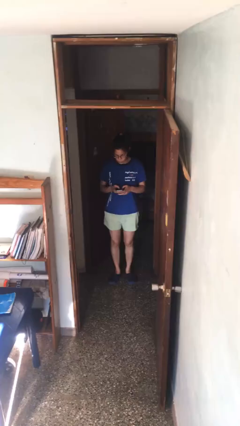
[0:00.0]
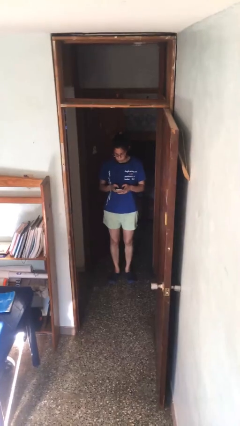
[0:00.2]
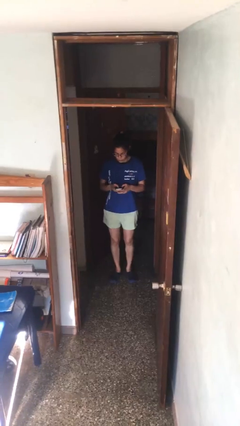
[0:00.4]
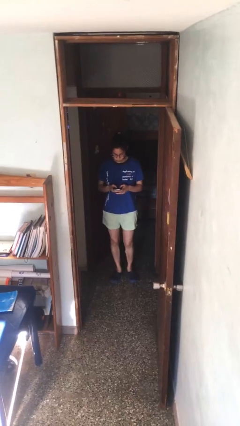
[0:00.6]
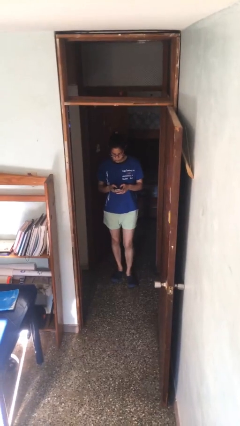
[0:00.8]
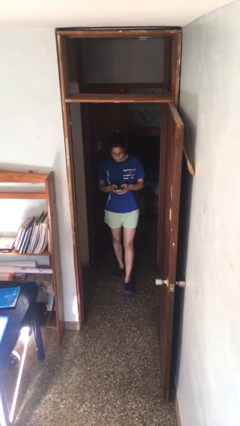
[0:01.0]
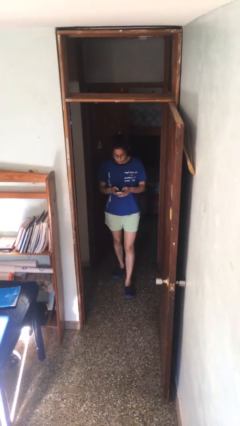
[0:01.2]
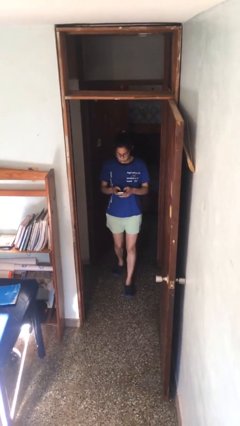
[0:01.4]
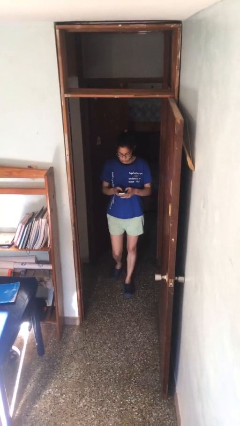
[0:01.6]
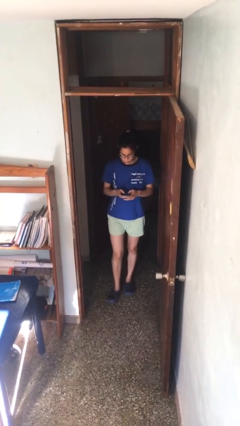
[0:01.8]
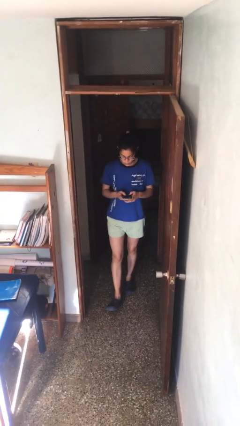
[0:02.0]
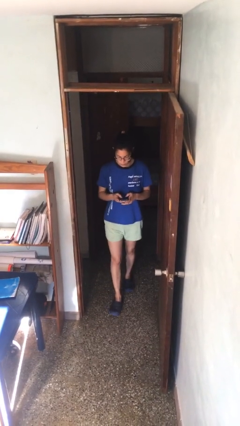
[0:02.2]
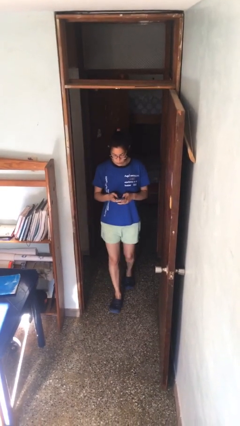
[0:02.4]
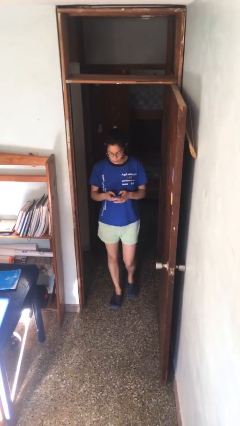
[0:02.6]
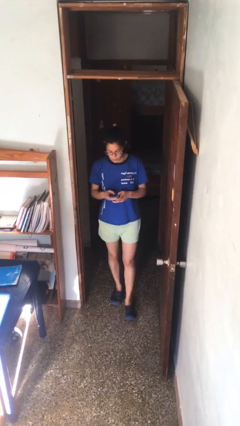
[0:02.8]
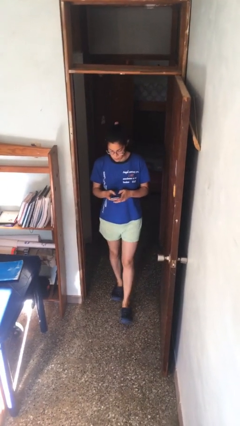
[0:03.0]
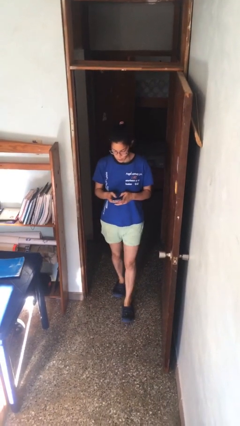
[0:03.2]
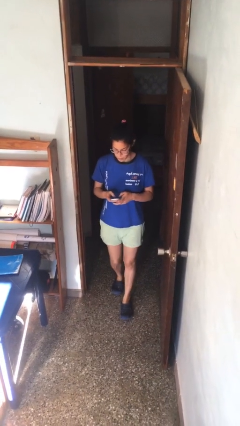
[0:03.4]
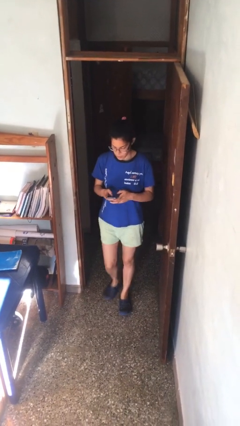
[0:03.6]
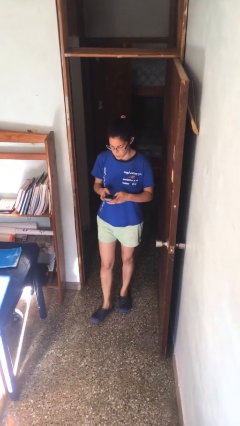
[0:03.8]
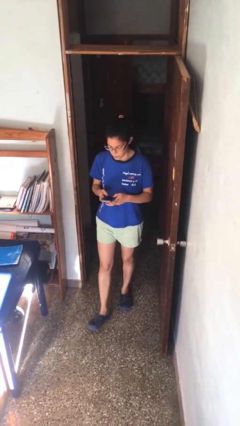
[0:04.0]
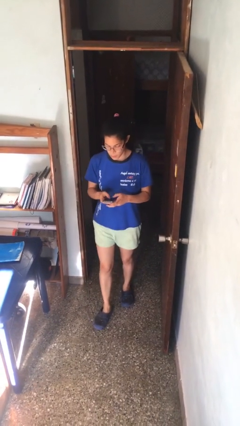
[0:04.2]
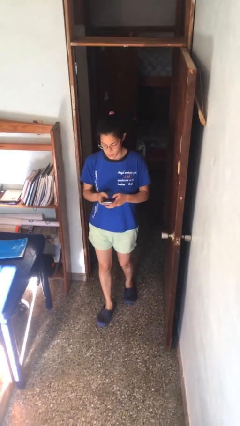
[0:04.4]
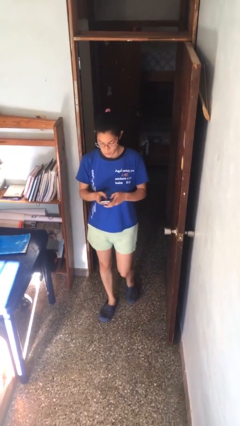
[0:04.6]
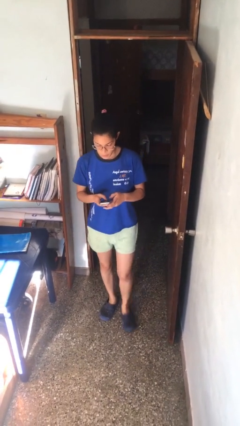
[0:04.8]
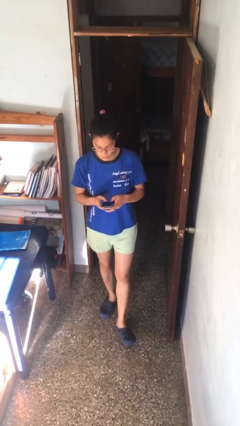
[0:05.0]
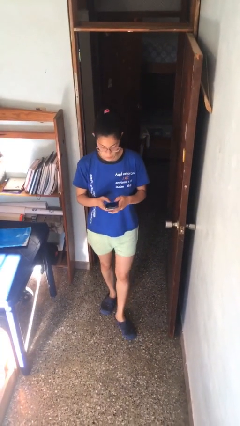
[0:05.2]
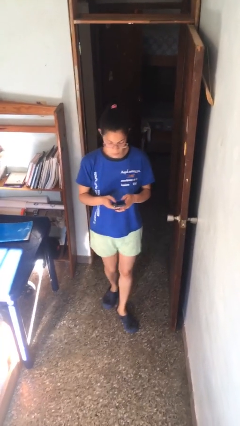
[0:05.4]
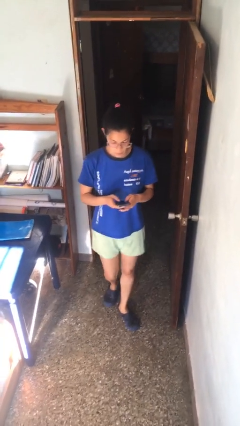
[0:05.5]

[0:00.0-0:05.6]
person texts on phone

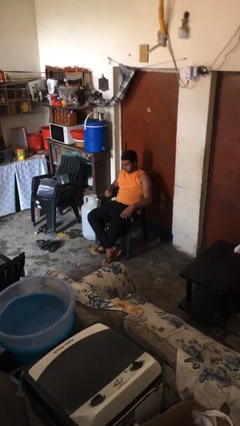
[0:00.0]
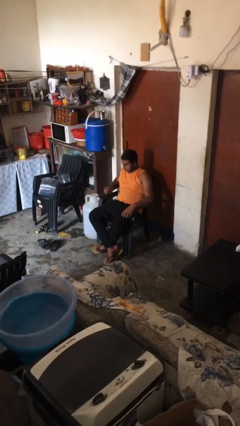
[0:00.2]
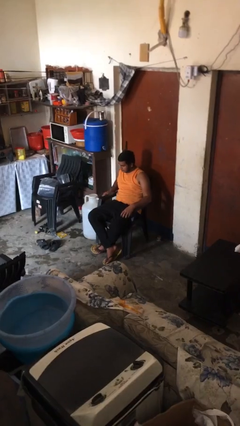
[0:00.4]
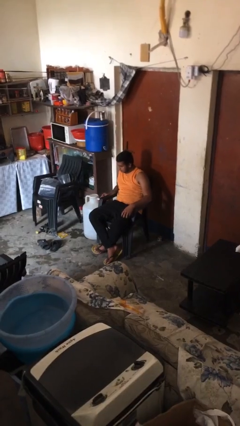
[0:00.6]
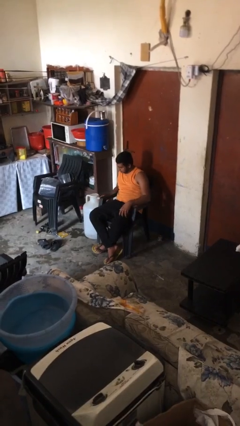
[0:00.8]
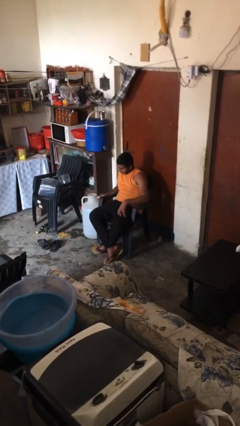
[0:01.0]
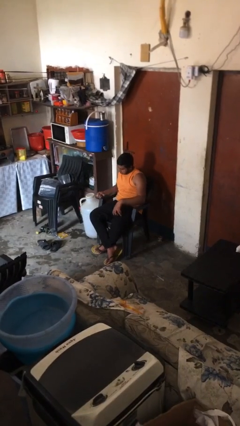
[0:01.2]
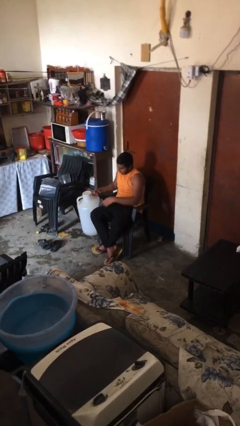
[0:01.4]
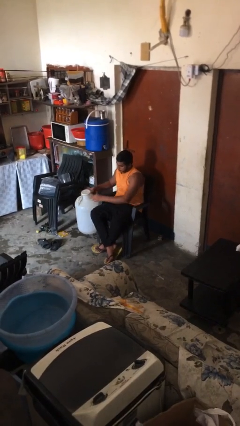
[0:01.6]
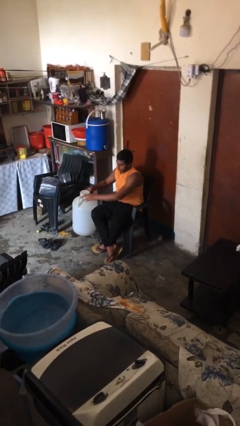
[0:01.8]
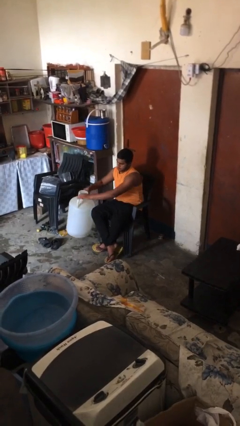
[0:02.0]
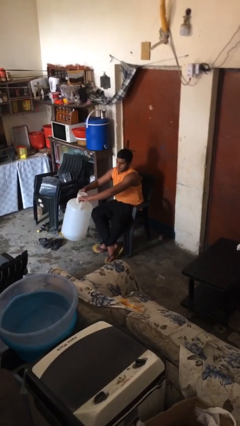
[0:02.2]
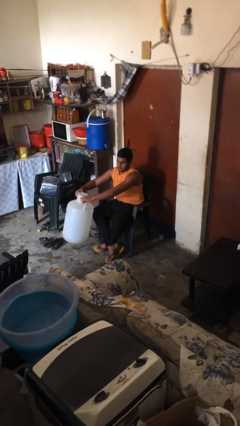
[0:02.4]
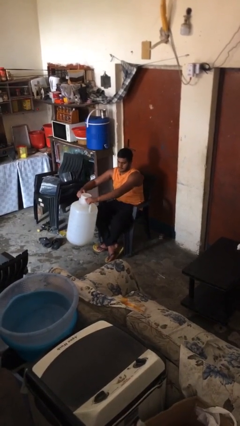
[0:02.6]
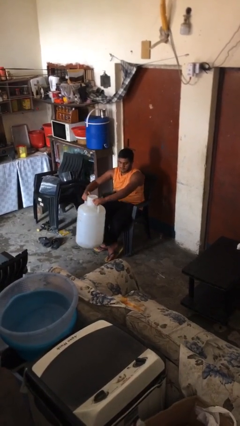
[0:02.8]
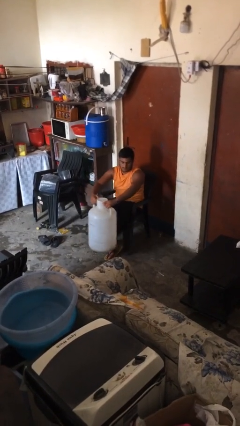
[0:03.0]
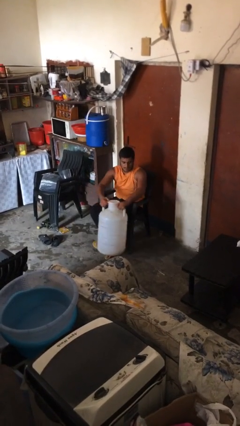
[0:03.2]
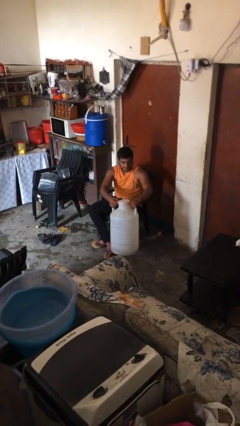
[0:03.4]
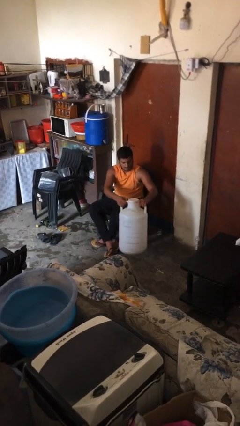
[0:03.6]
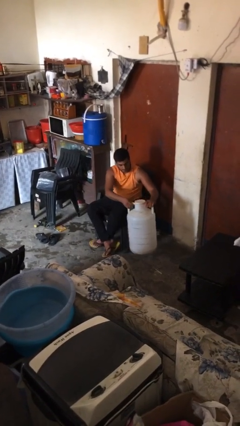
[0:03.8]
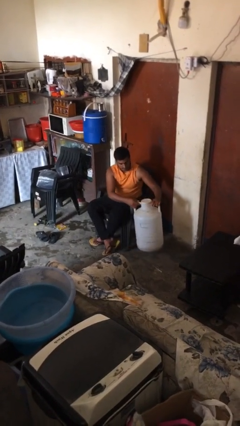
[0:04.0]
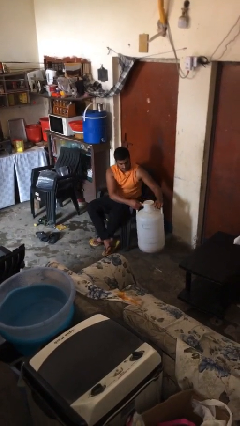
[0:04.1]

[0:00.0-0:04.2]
person picks up object from floor

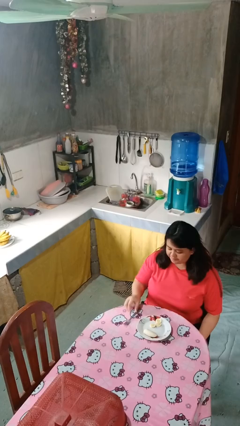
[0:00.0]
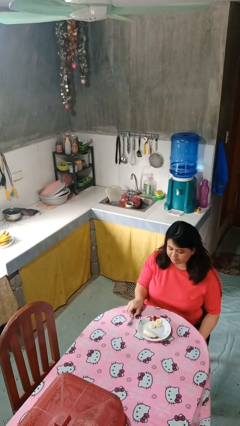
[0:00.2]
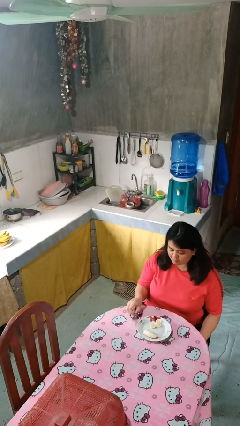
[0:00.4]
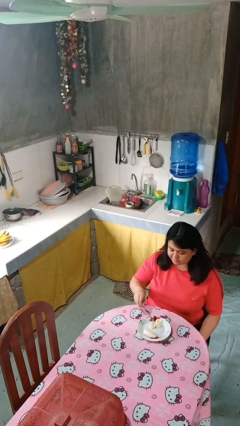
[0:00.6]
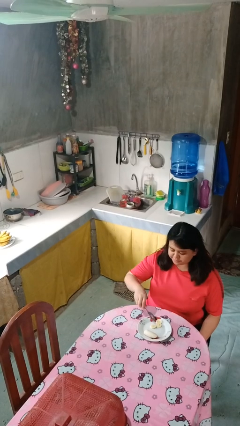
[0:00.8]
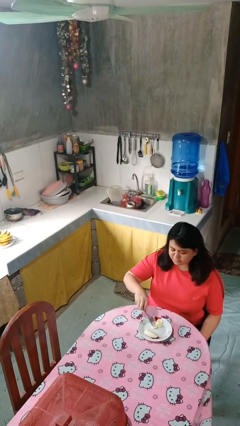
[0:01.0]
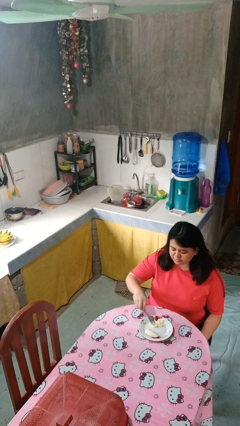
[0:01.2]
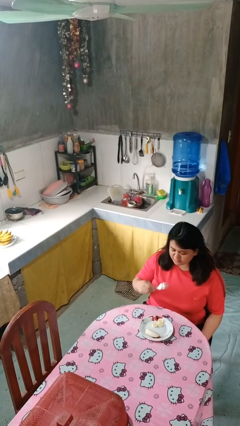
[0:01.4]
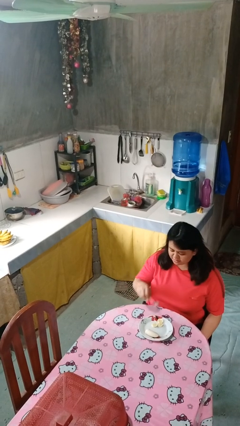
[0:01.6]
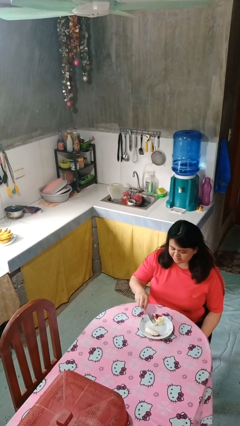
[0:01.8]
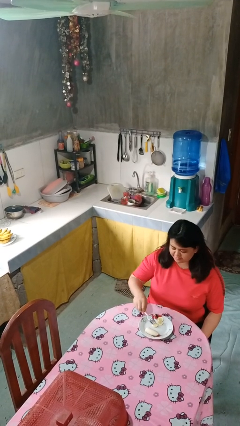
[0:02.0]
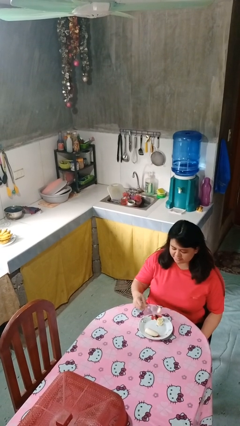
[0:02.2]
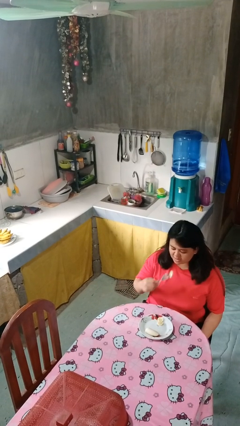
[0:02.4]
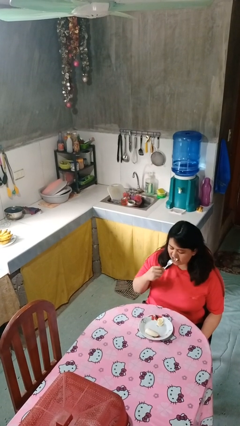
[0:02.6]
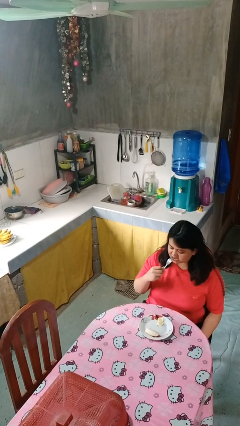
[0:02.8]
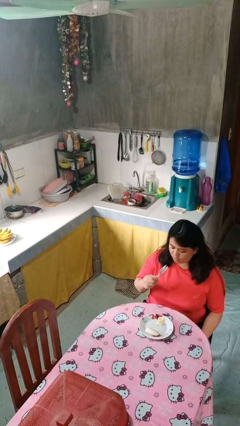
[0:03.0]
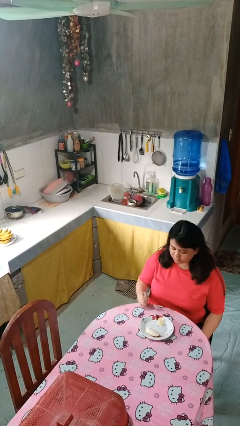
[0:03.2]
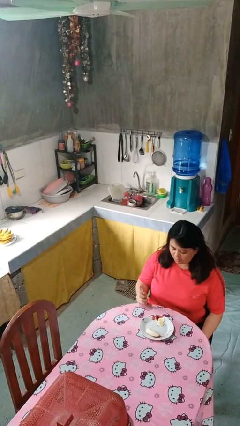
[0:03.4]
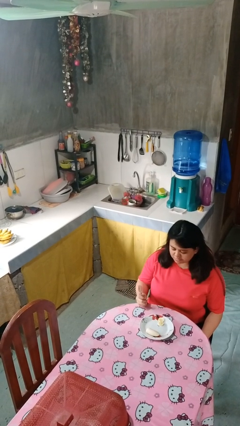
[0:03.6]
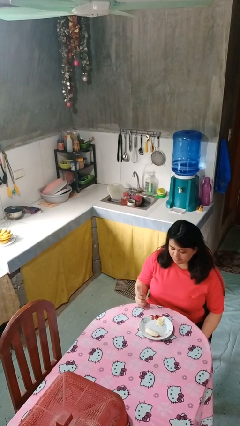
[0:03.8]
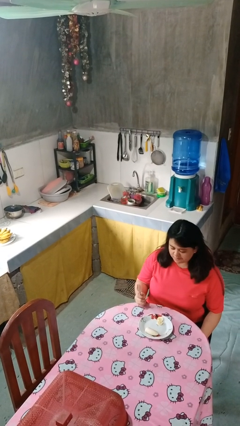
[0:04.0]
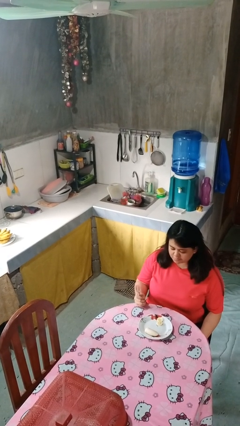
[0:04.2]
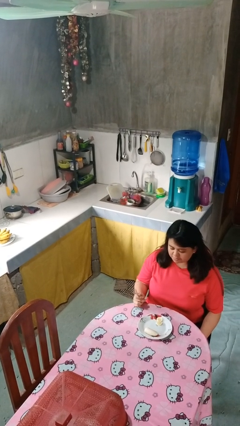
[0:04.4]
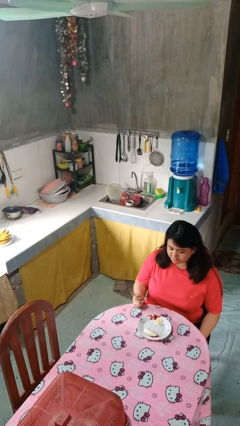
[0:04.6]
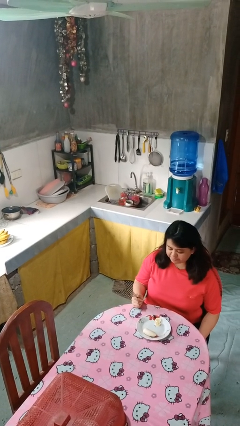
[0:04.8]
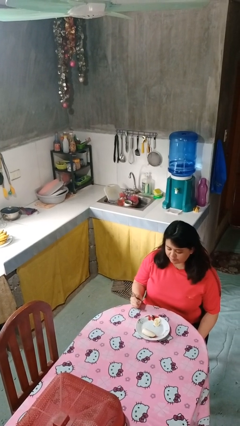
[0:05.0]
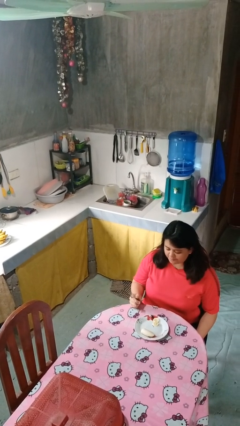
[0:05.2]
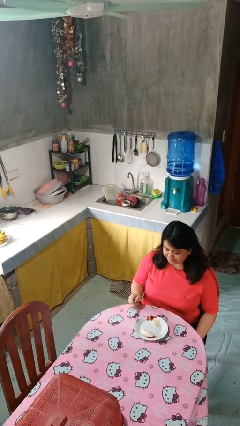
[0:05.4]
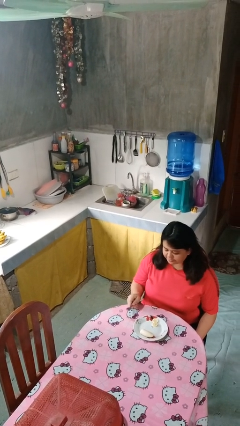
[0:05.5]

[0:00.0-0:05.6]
person eats with utensil

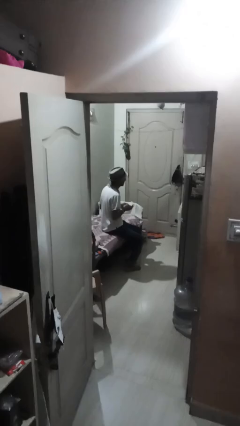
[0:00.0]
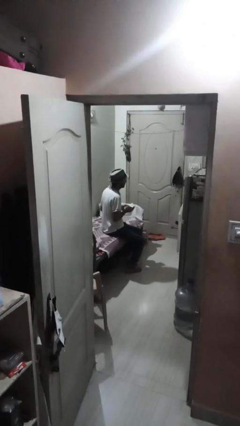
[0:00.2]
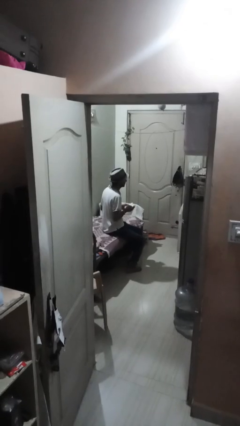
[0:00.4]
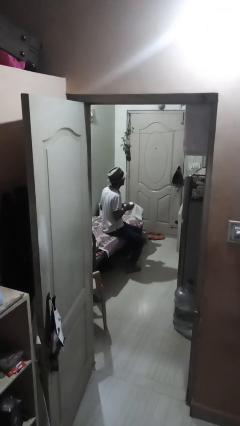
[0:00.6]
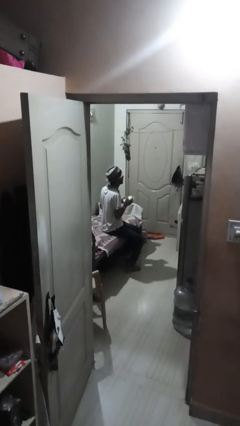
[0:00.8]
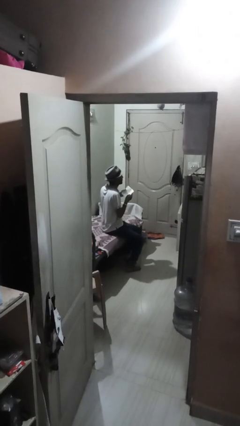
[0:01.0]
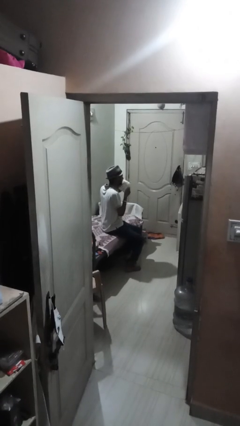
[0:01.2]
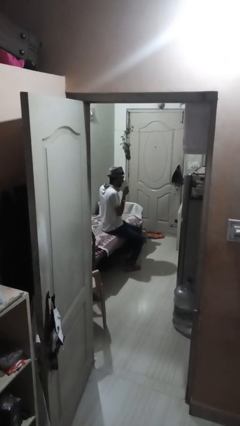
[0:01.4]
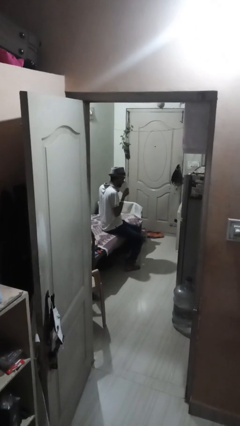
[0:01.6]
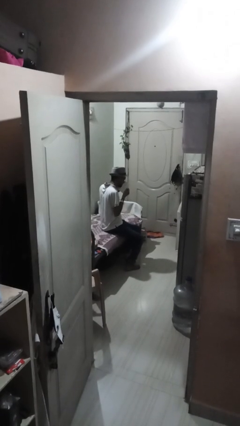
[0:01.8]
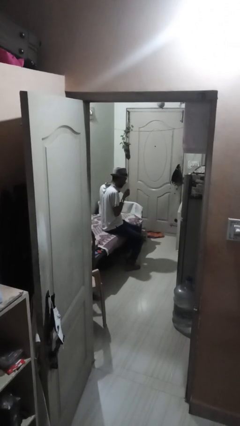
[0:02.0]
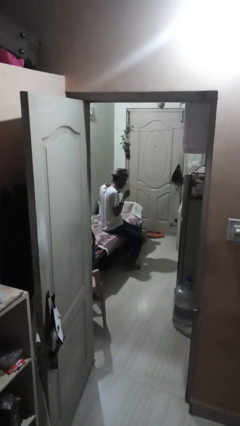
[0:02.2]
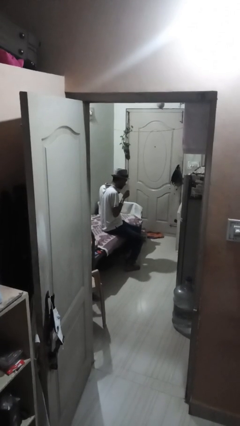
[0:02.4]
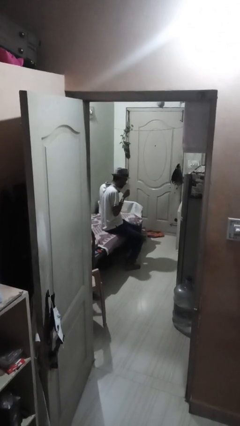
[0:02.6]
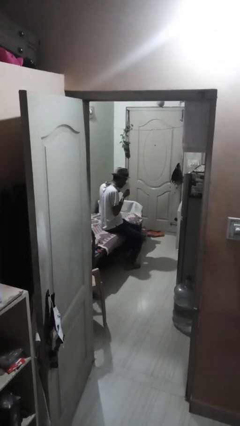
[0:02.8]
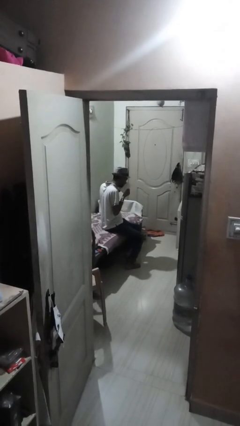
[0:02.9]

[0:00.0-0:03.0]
person blows nose
